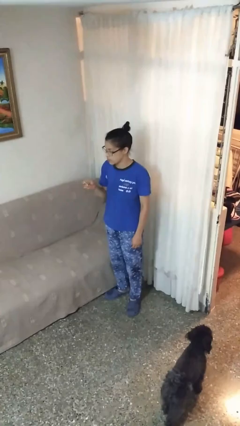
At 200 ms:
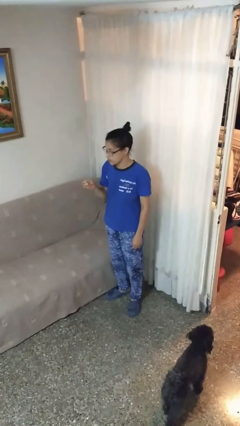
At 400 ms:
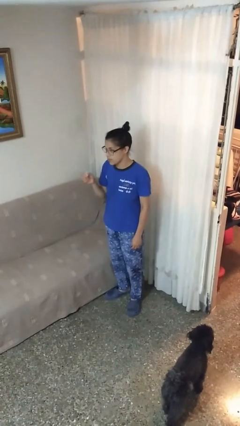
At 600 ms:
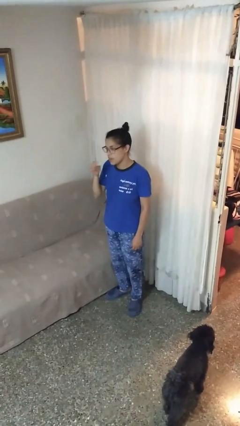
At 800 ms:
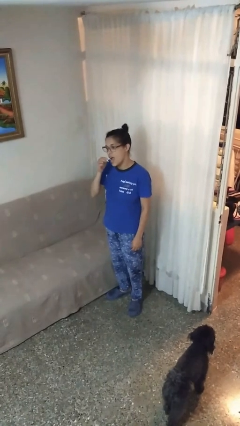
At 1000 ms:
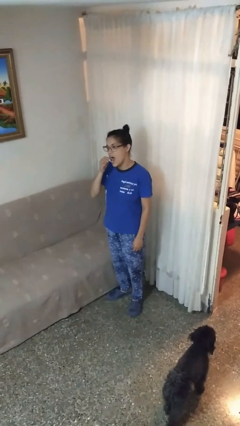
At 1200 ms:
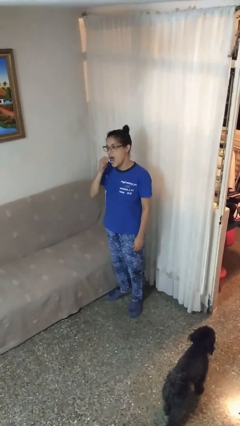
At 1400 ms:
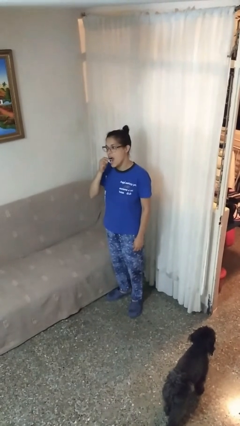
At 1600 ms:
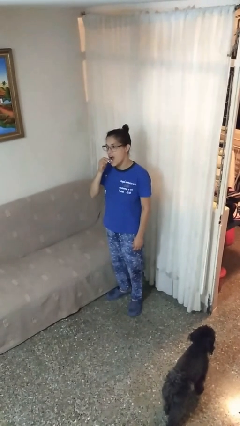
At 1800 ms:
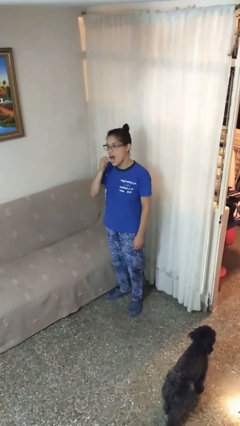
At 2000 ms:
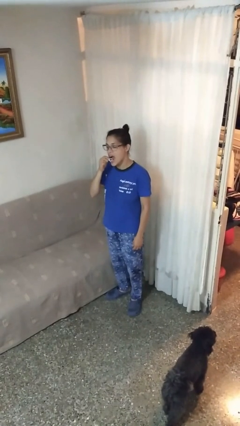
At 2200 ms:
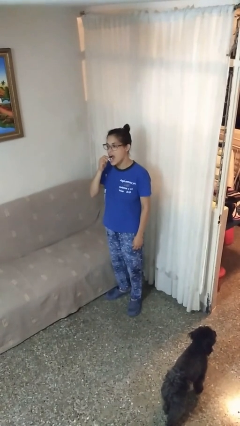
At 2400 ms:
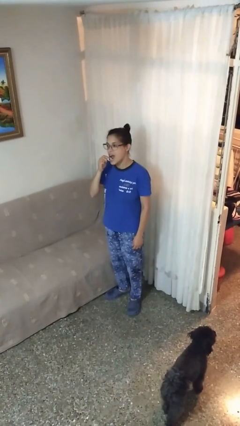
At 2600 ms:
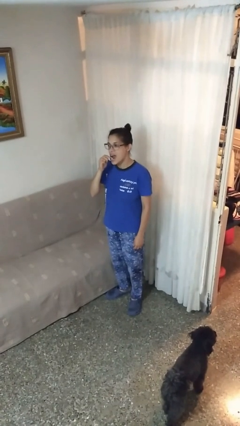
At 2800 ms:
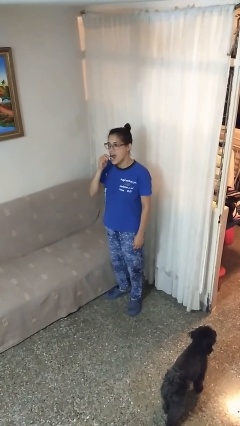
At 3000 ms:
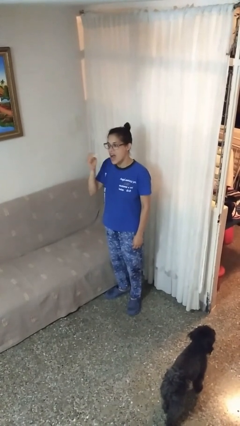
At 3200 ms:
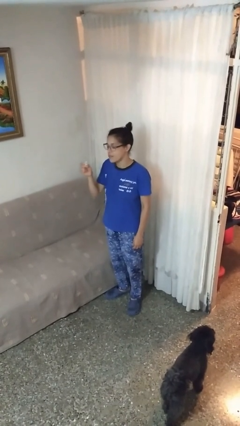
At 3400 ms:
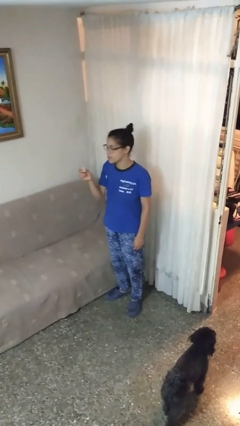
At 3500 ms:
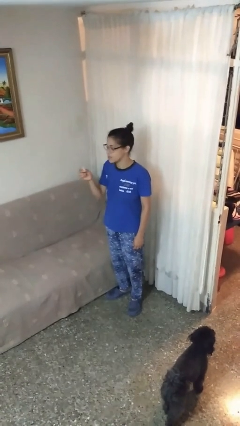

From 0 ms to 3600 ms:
person flosses

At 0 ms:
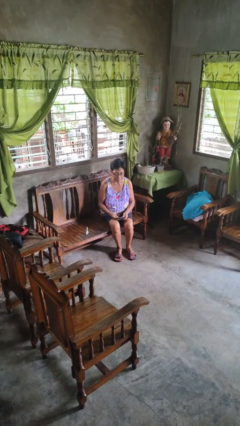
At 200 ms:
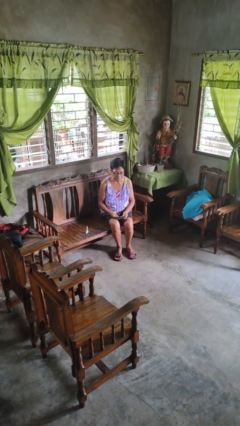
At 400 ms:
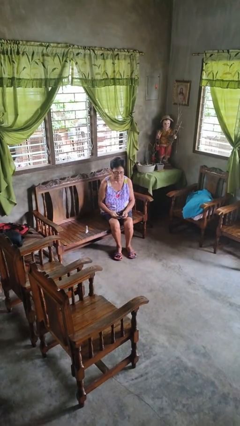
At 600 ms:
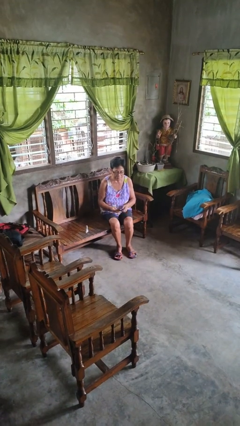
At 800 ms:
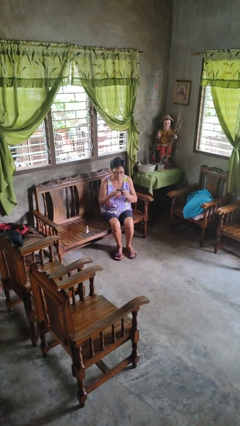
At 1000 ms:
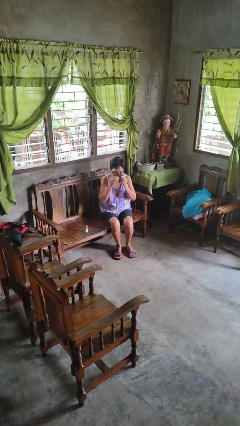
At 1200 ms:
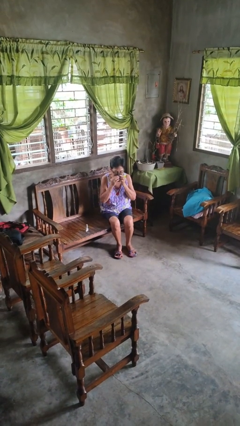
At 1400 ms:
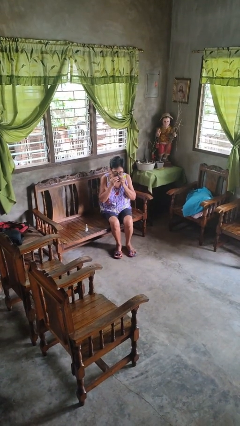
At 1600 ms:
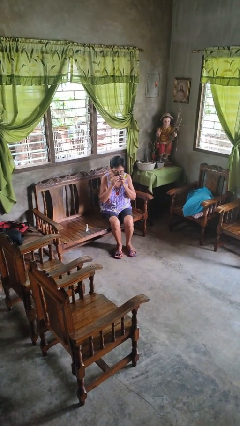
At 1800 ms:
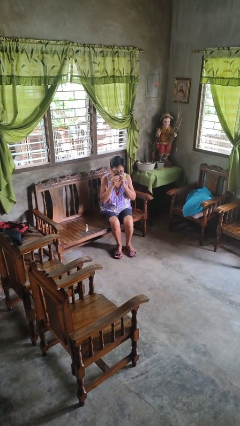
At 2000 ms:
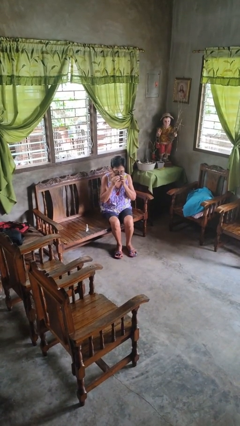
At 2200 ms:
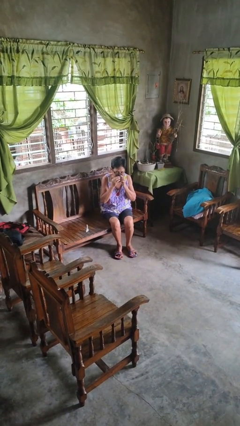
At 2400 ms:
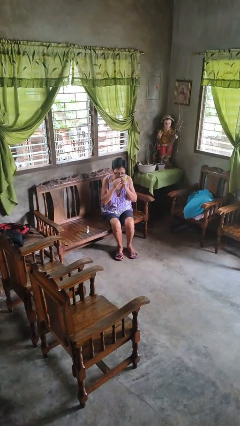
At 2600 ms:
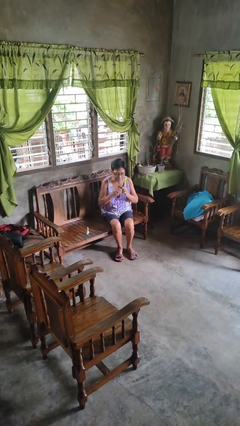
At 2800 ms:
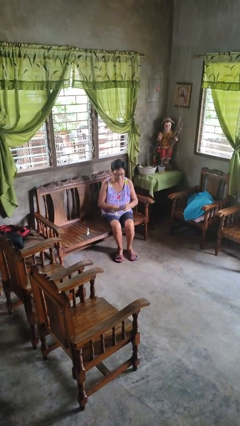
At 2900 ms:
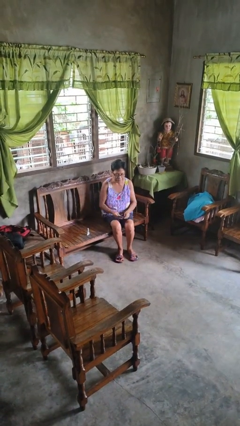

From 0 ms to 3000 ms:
person blows nose

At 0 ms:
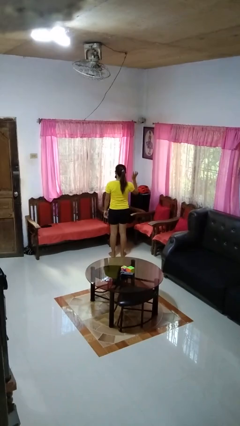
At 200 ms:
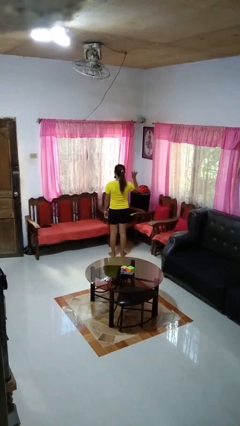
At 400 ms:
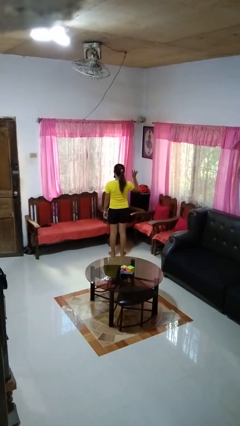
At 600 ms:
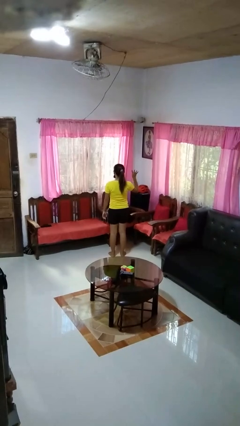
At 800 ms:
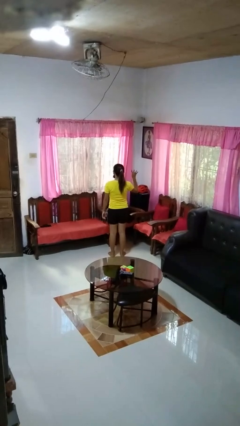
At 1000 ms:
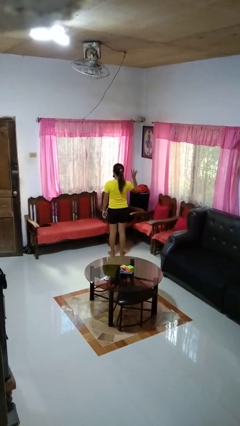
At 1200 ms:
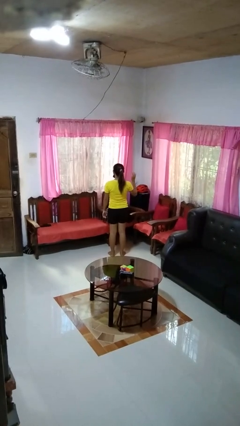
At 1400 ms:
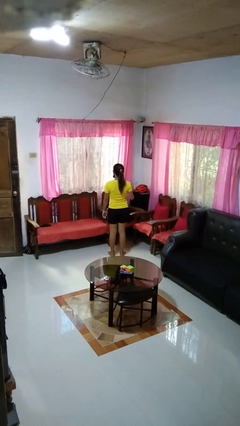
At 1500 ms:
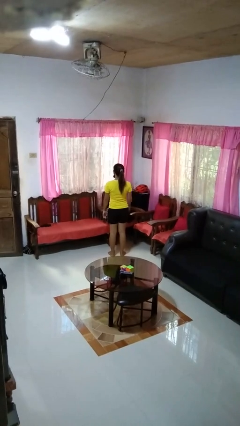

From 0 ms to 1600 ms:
person gestures number four

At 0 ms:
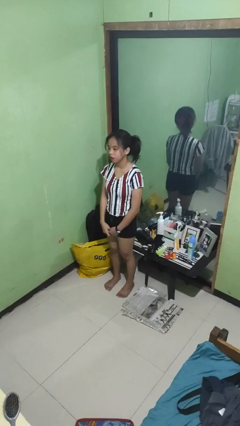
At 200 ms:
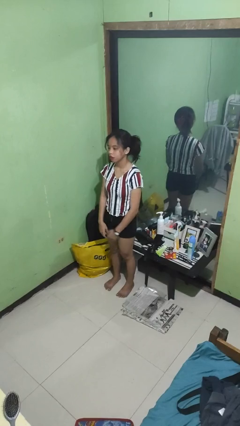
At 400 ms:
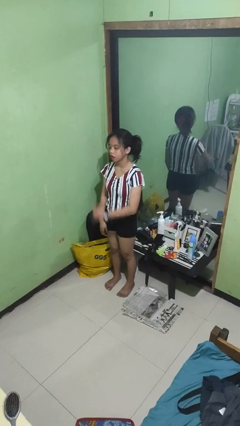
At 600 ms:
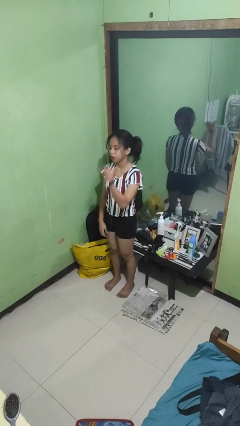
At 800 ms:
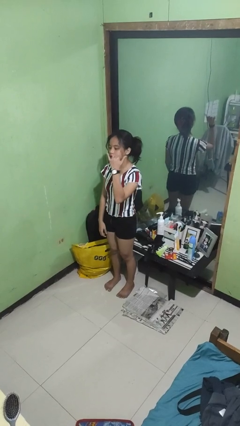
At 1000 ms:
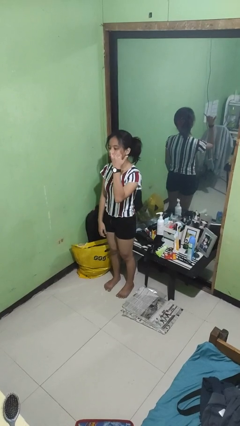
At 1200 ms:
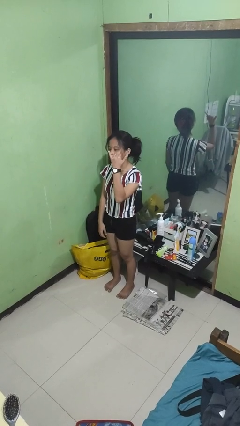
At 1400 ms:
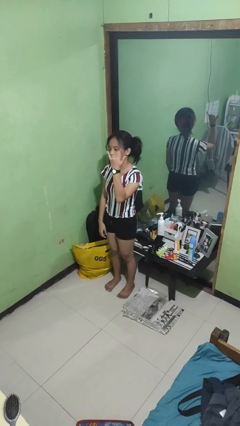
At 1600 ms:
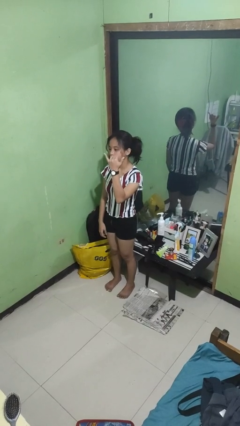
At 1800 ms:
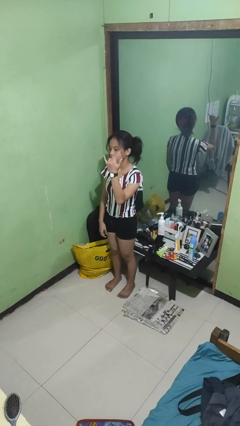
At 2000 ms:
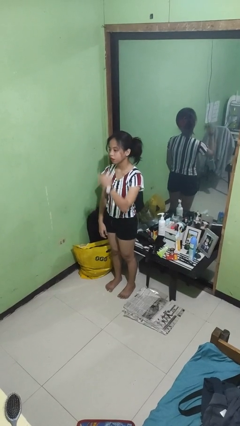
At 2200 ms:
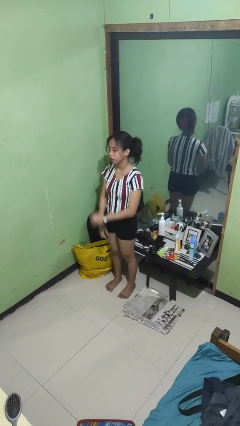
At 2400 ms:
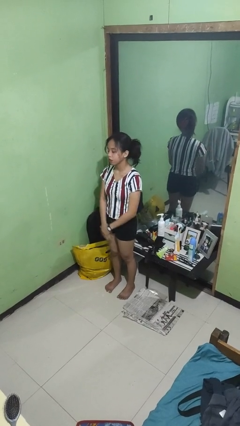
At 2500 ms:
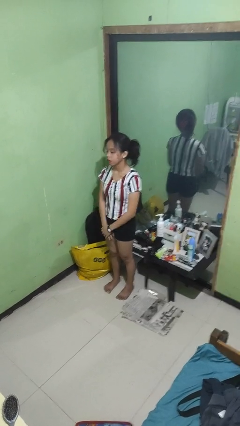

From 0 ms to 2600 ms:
person gestures hang loose

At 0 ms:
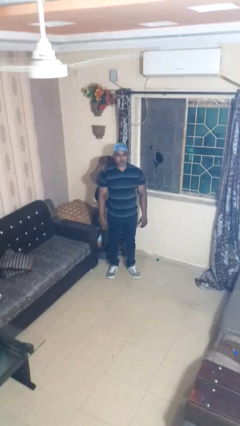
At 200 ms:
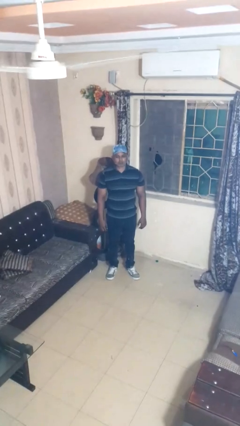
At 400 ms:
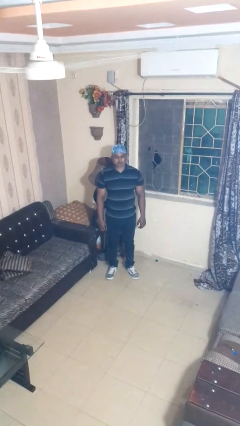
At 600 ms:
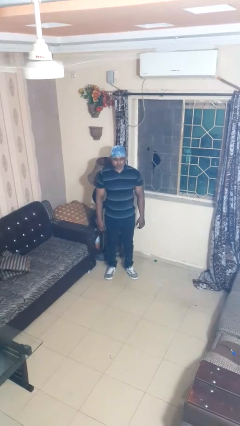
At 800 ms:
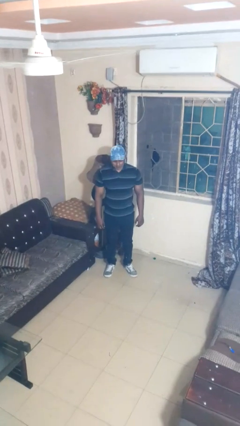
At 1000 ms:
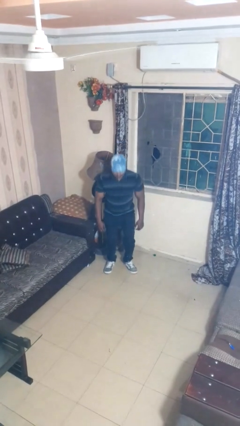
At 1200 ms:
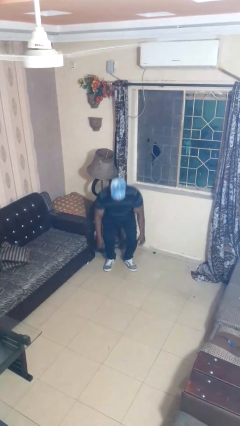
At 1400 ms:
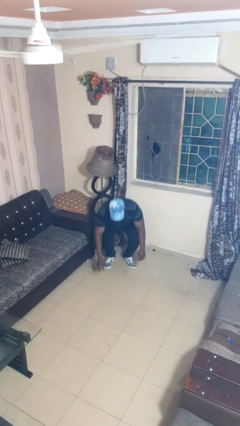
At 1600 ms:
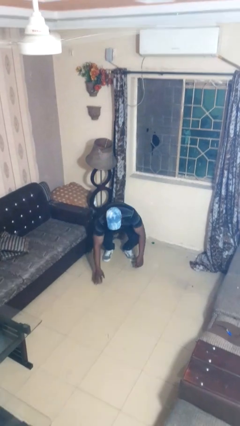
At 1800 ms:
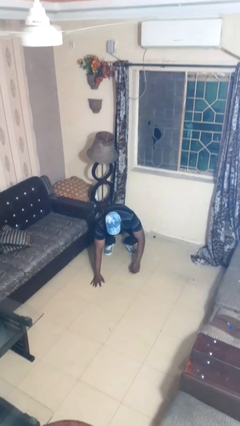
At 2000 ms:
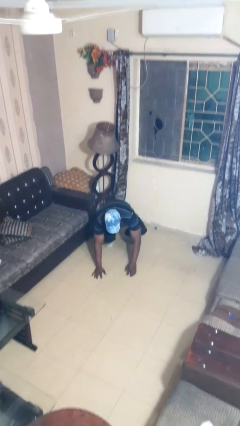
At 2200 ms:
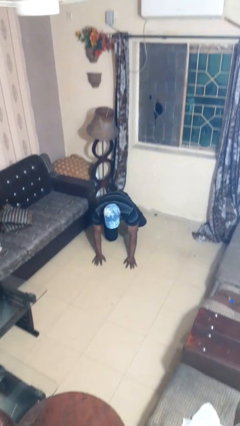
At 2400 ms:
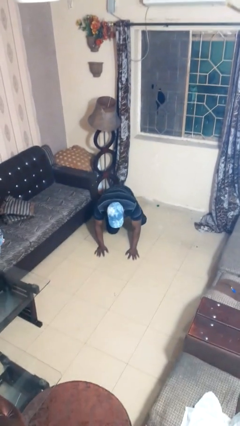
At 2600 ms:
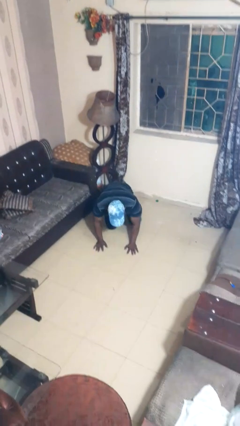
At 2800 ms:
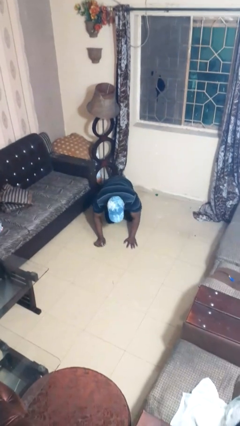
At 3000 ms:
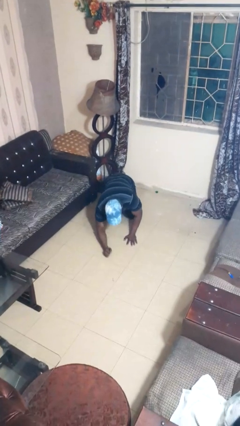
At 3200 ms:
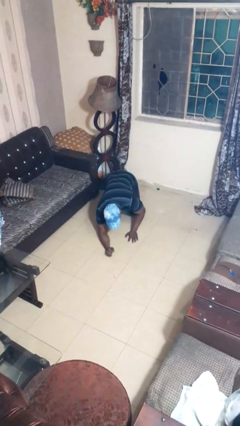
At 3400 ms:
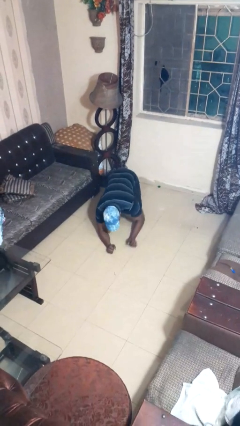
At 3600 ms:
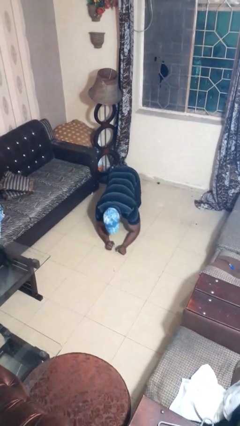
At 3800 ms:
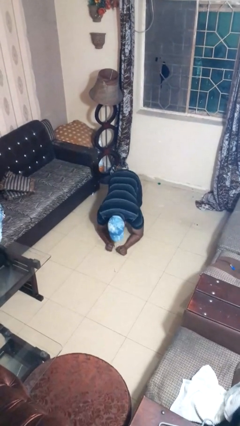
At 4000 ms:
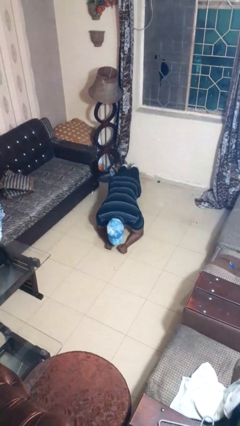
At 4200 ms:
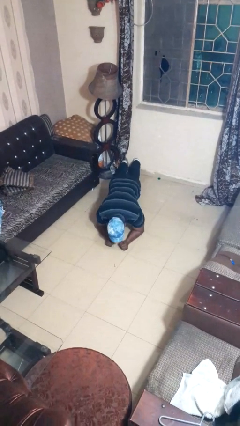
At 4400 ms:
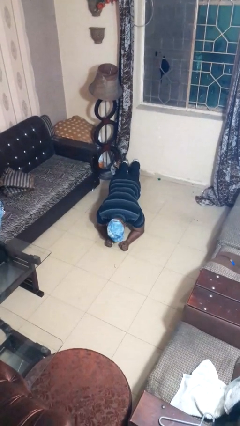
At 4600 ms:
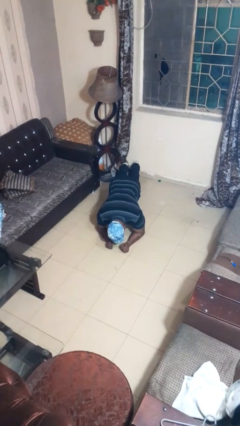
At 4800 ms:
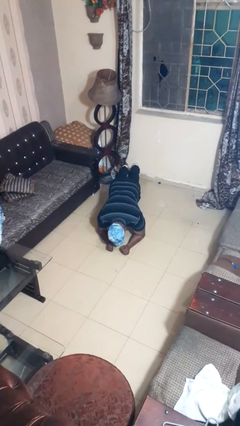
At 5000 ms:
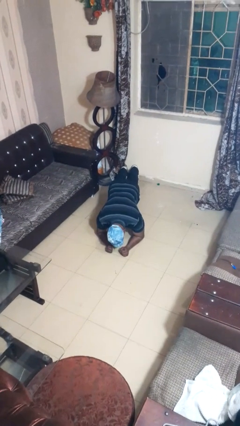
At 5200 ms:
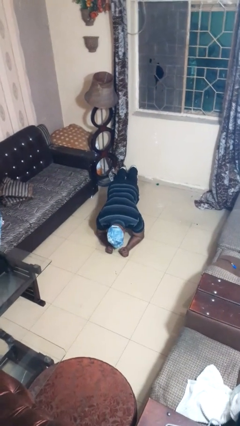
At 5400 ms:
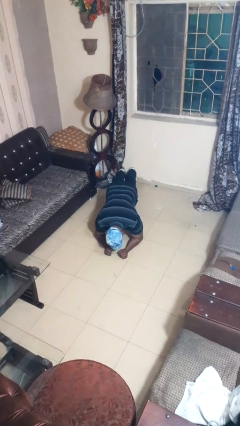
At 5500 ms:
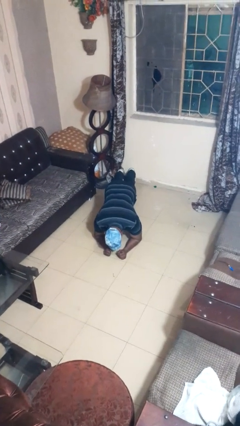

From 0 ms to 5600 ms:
person exercises with plank

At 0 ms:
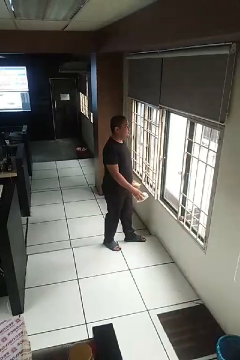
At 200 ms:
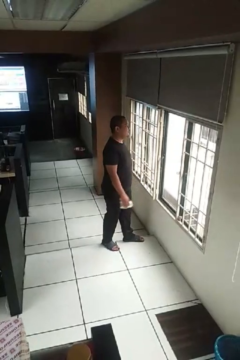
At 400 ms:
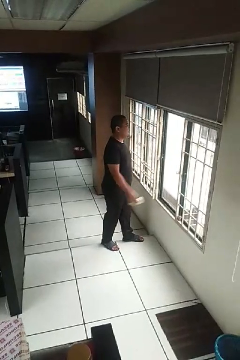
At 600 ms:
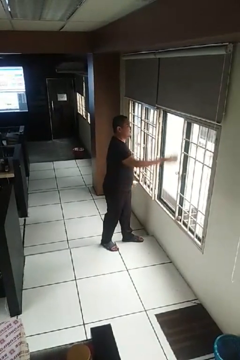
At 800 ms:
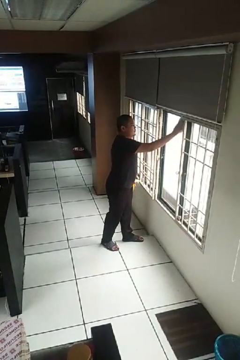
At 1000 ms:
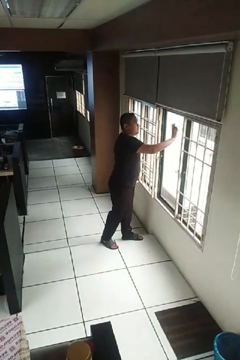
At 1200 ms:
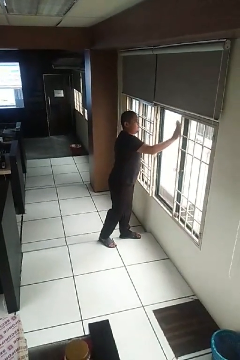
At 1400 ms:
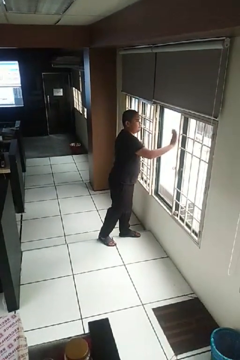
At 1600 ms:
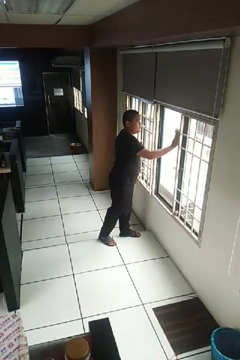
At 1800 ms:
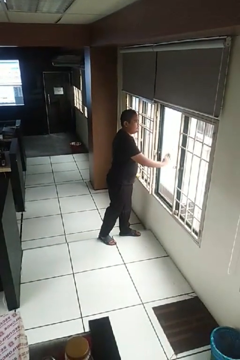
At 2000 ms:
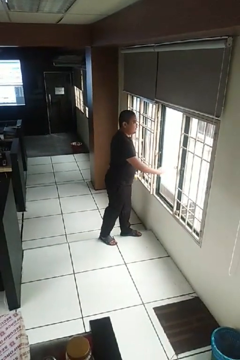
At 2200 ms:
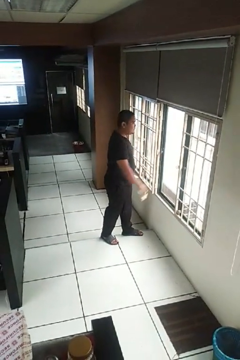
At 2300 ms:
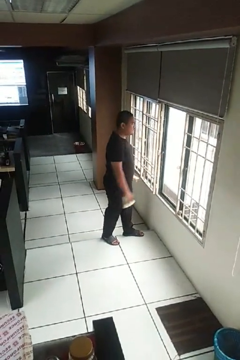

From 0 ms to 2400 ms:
person washes window
